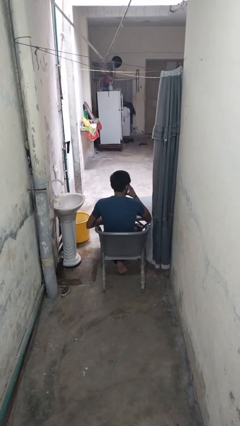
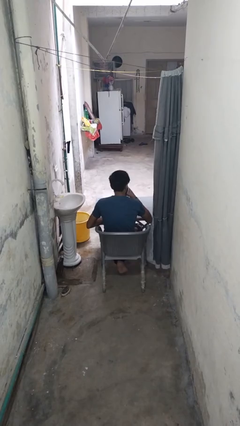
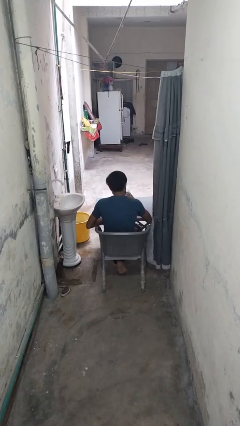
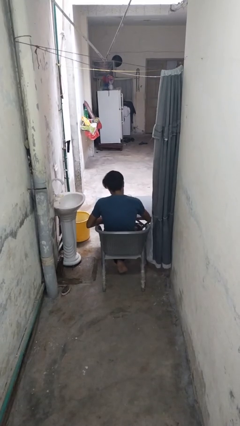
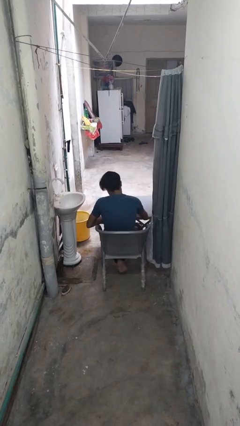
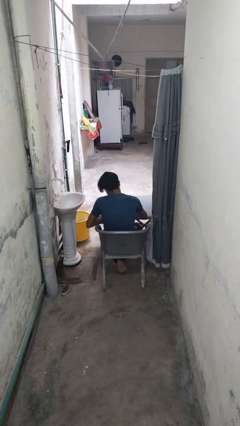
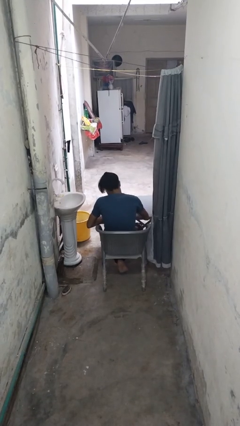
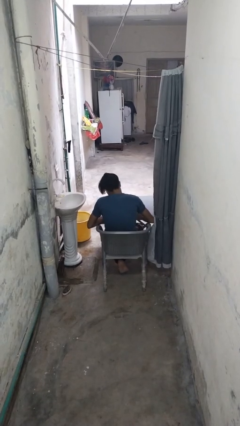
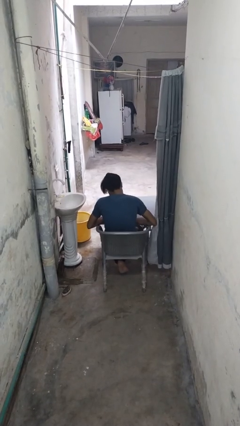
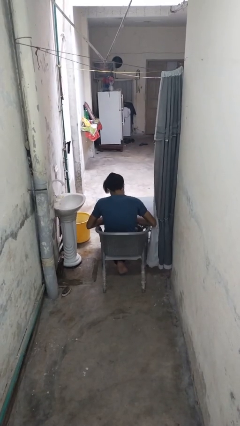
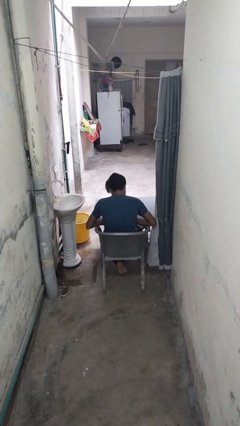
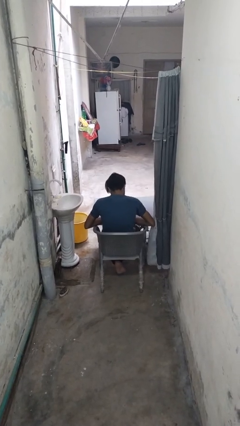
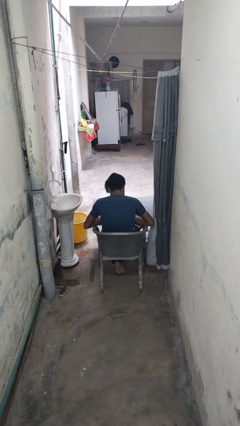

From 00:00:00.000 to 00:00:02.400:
person puts down object on table

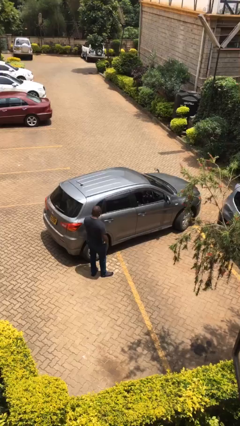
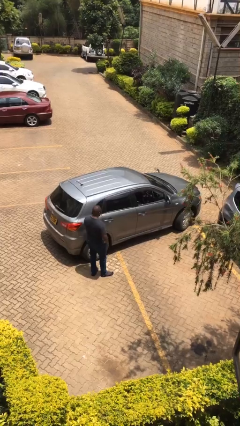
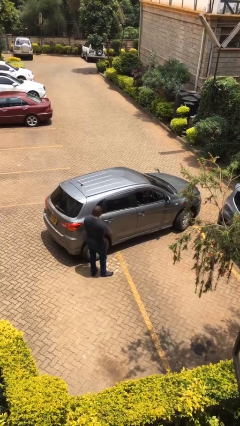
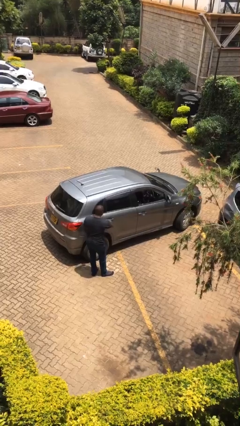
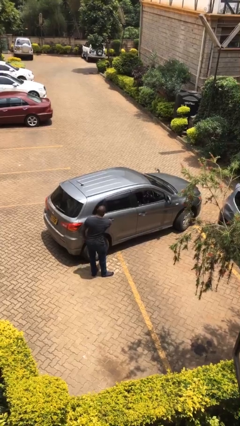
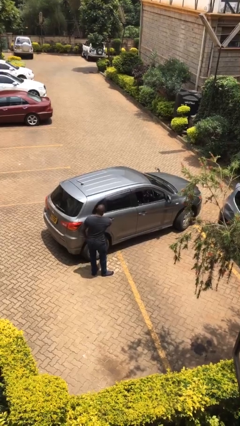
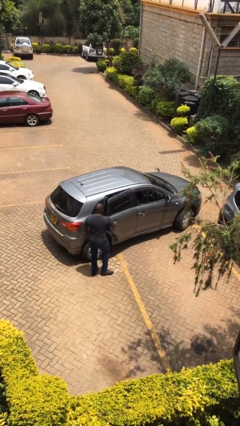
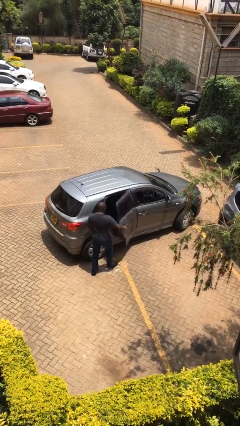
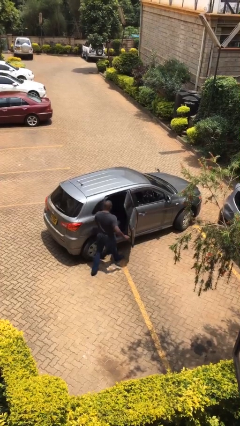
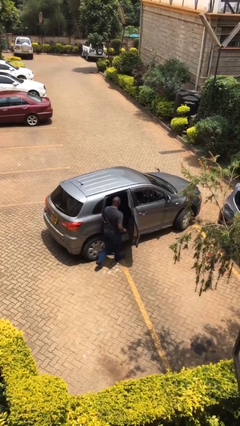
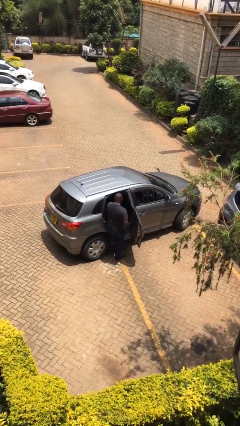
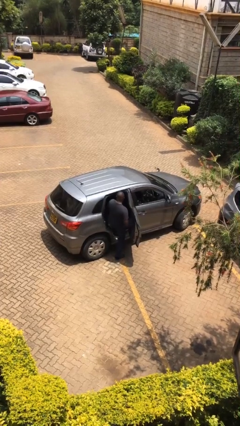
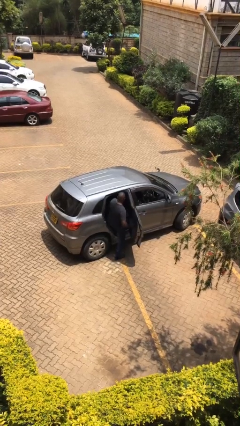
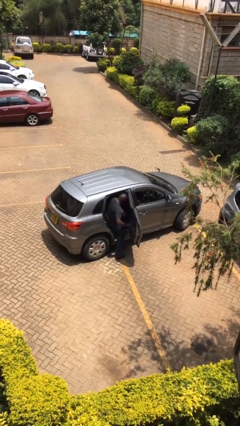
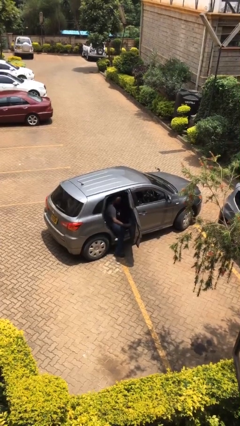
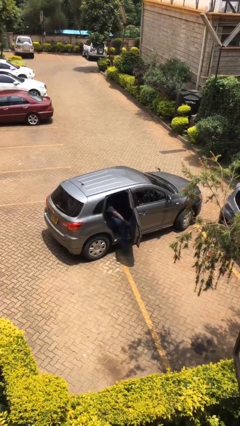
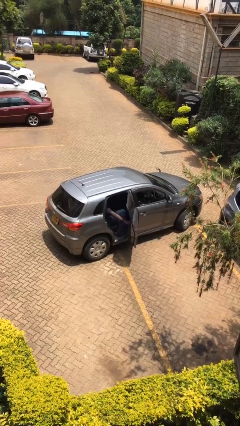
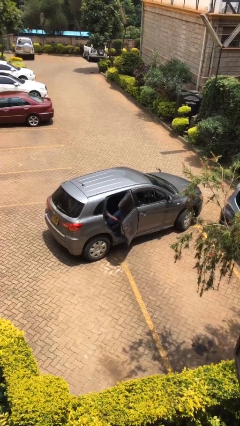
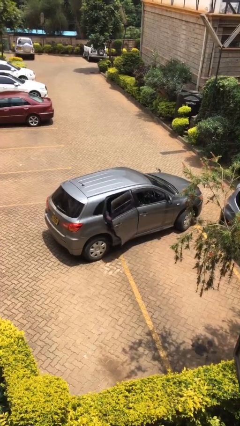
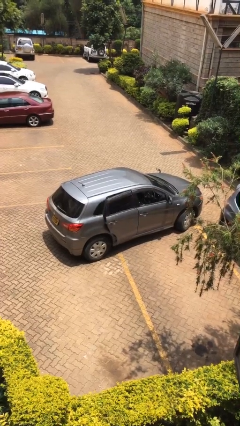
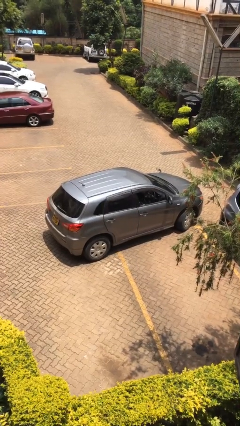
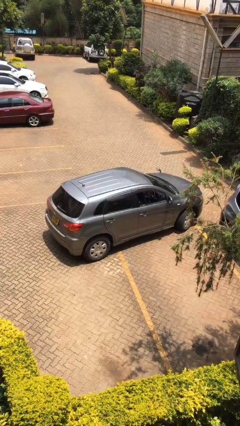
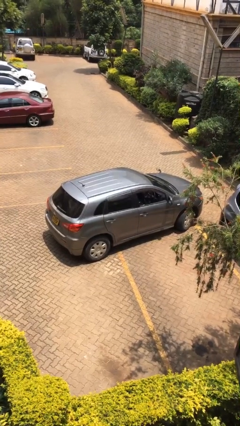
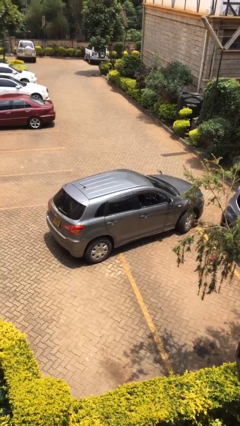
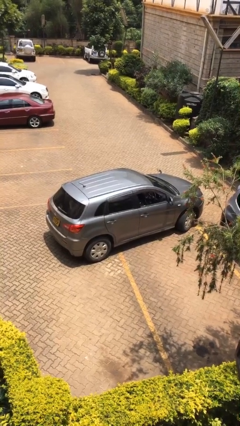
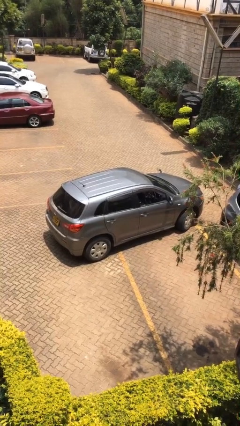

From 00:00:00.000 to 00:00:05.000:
car picks up person

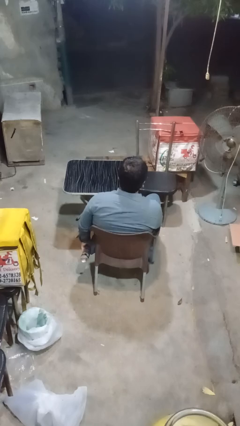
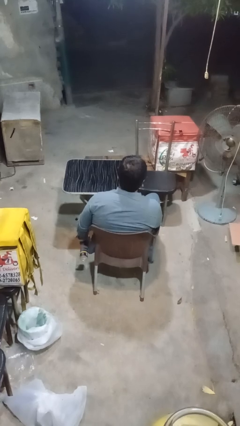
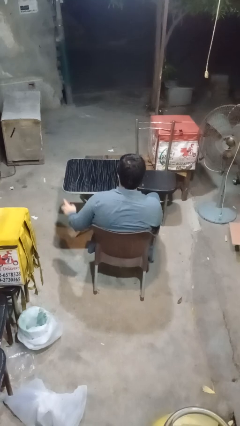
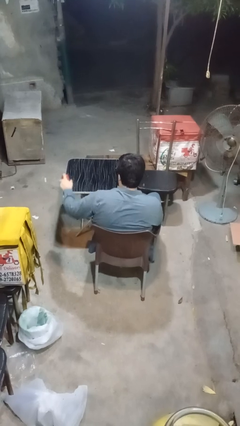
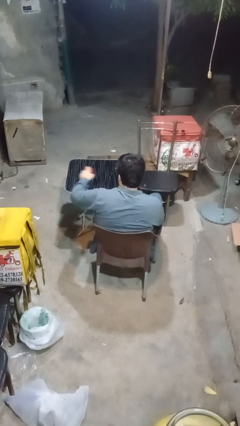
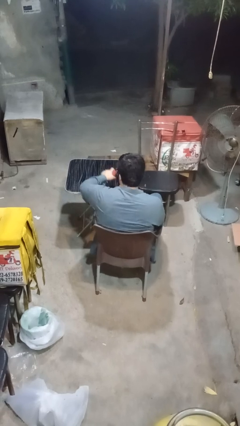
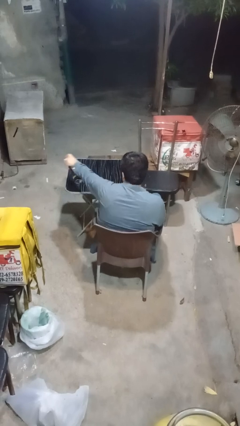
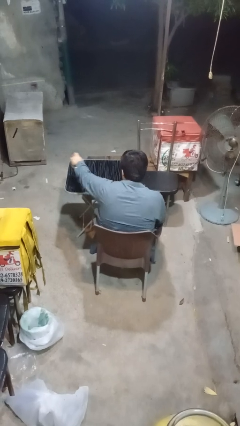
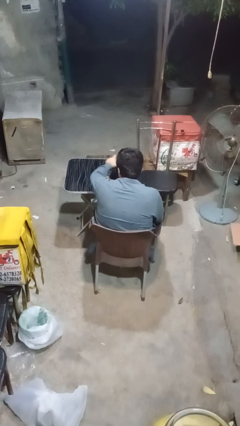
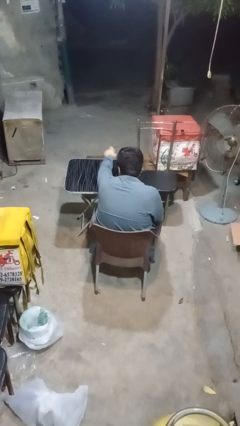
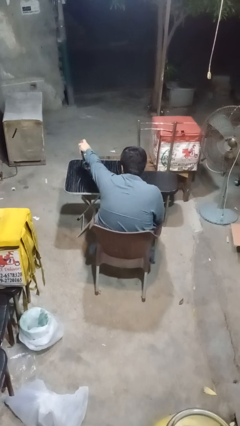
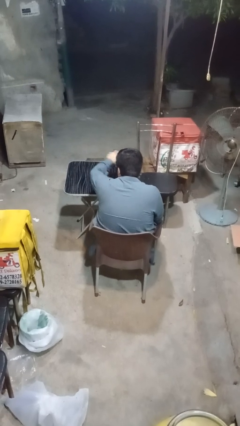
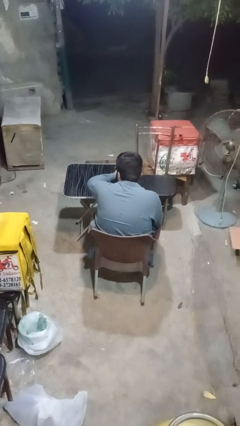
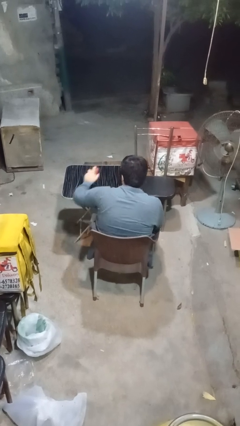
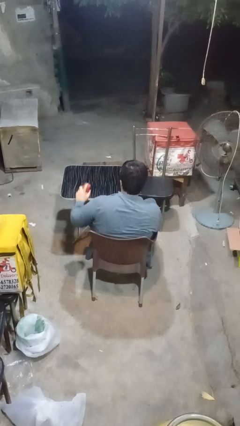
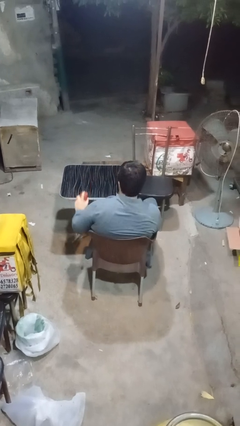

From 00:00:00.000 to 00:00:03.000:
person sprays from bottle

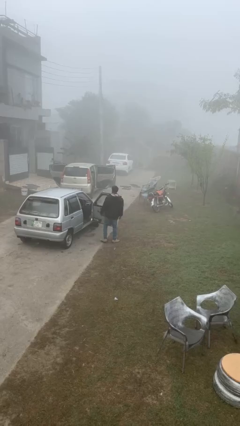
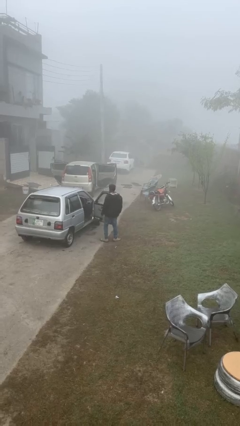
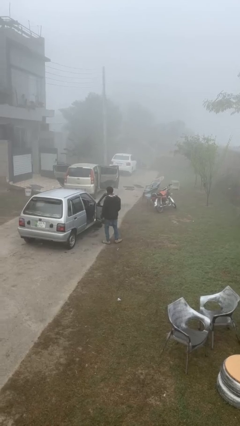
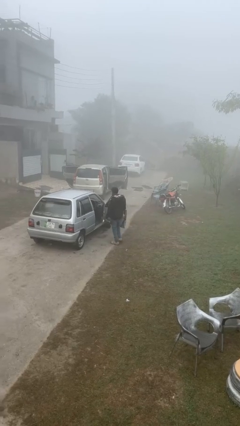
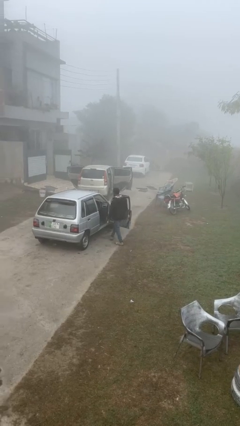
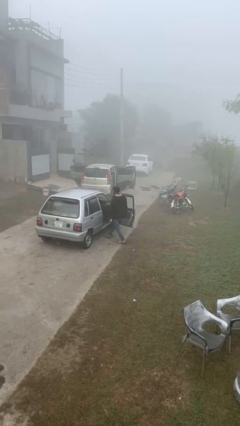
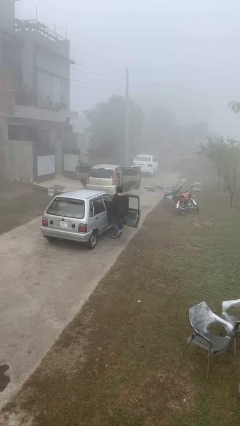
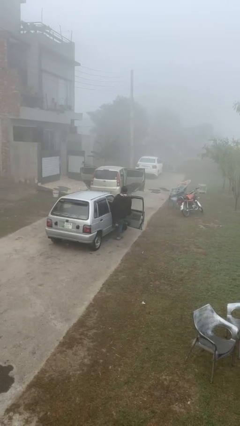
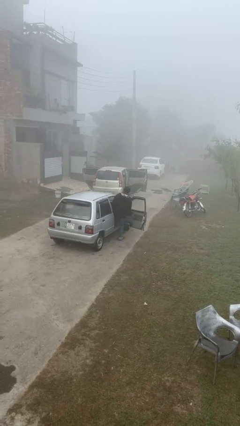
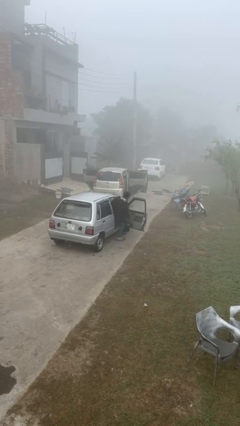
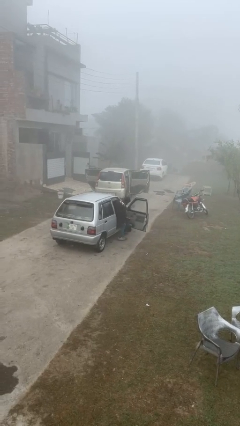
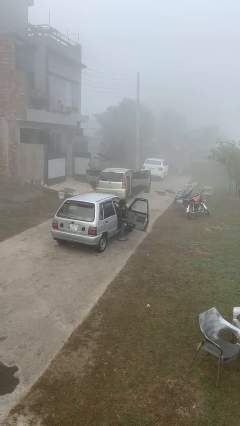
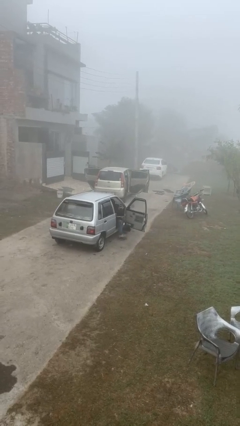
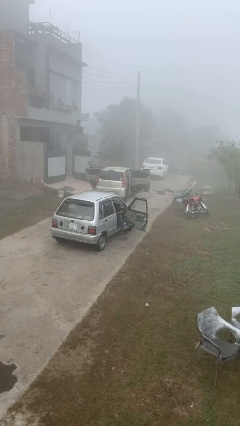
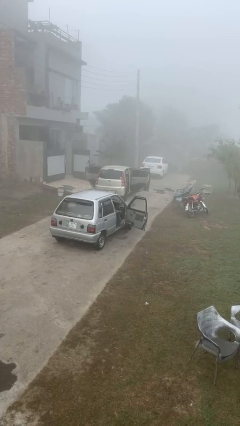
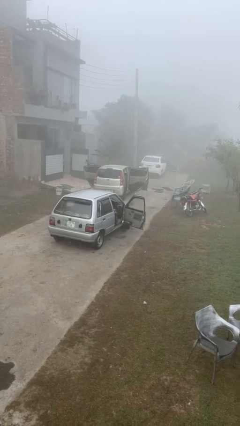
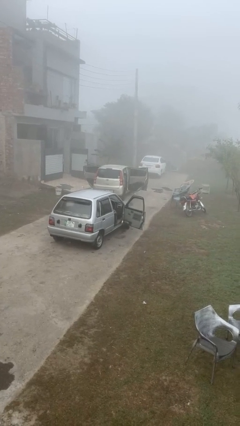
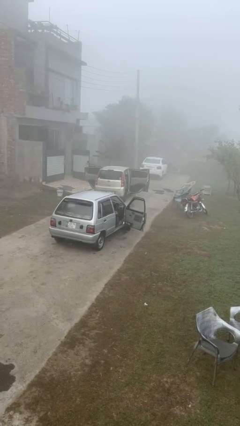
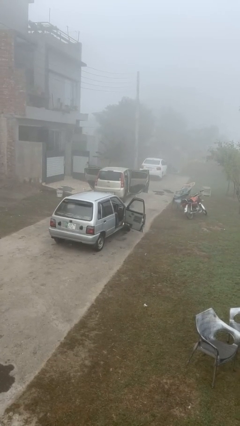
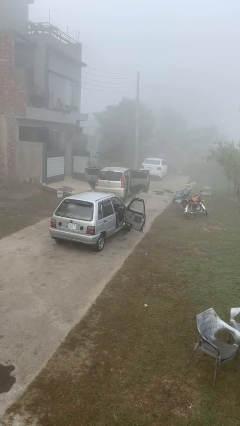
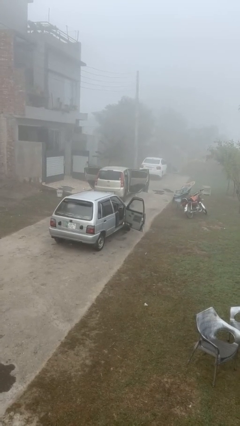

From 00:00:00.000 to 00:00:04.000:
person enters car

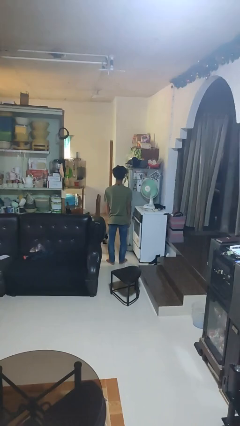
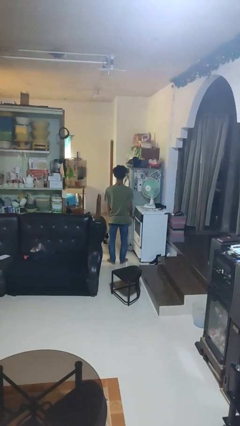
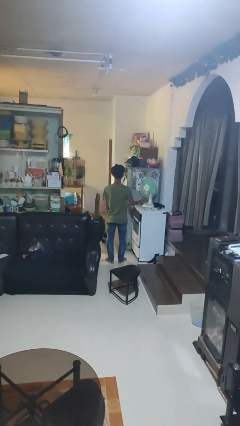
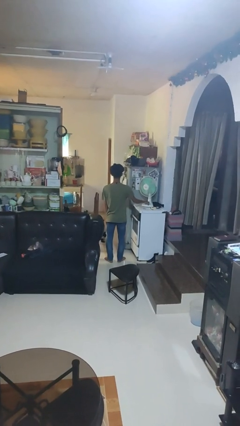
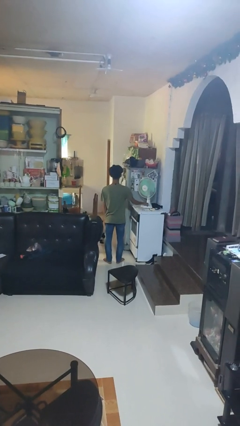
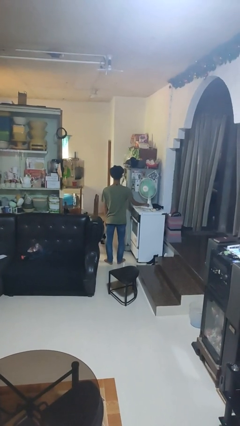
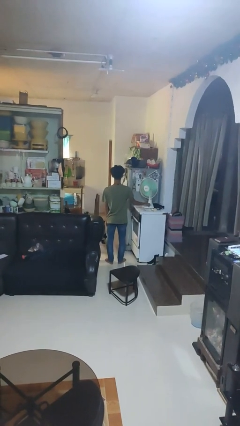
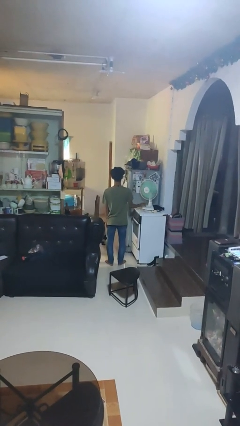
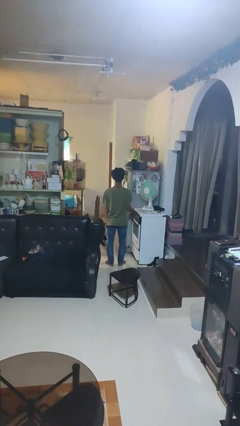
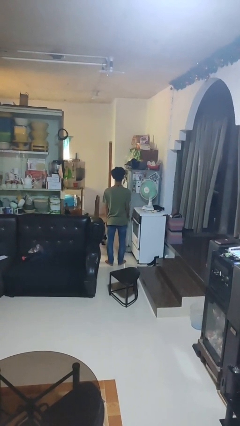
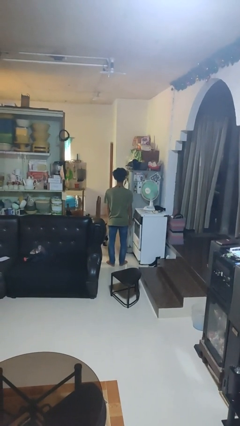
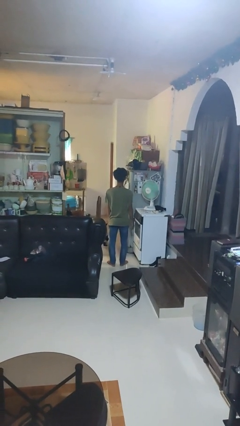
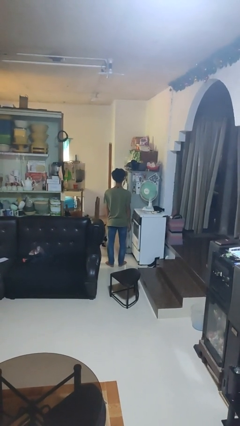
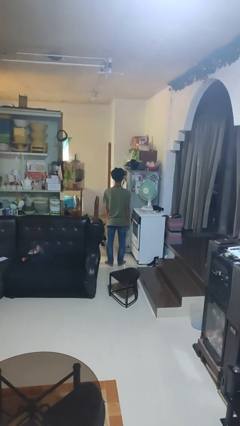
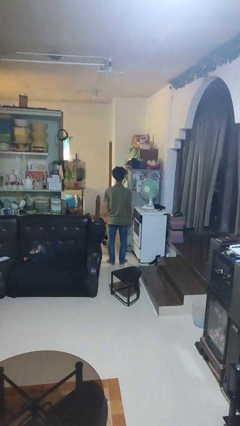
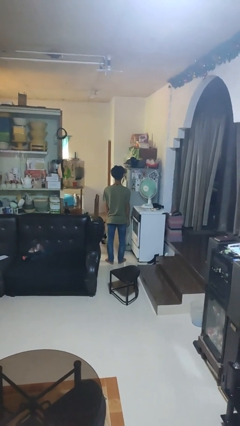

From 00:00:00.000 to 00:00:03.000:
person turns on fan

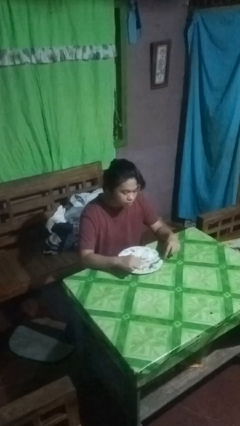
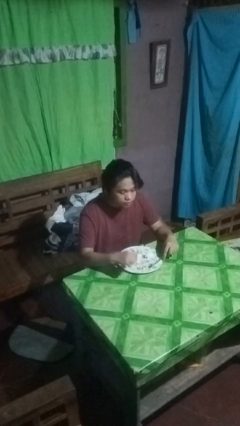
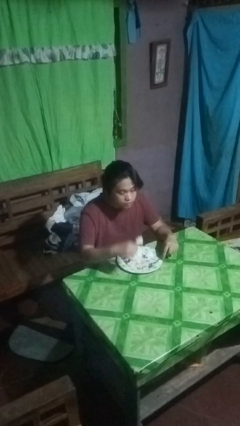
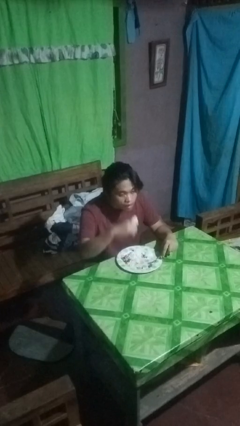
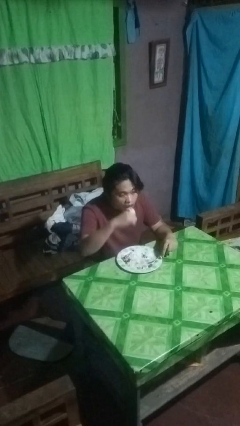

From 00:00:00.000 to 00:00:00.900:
person eats with utensil
